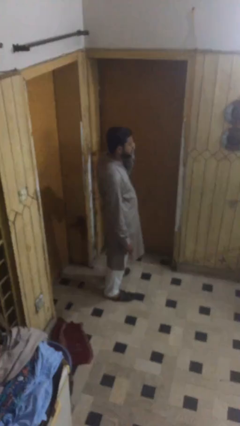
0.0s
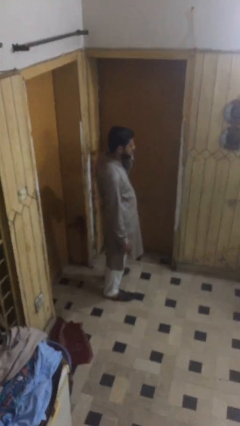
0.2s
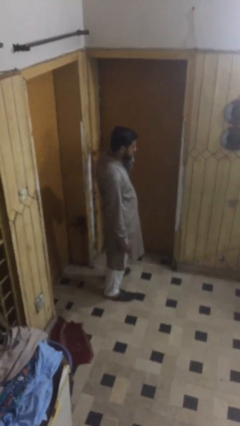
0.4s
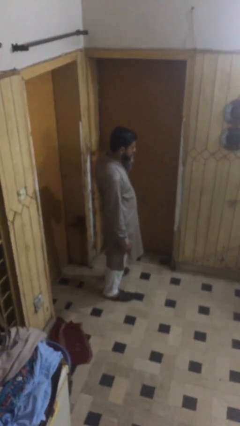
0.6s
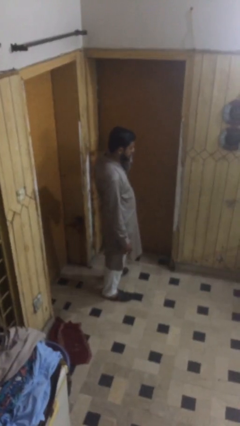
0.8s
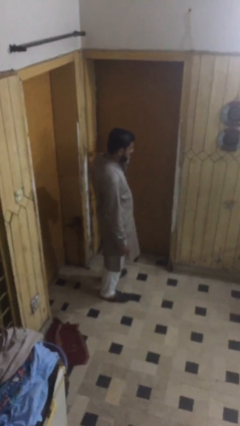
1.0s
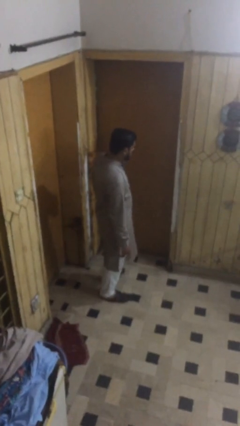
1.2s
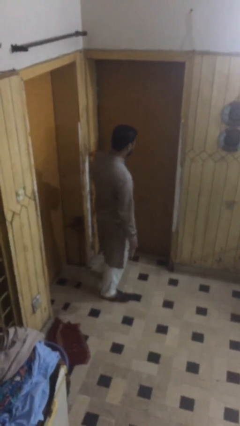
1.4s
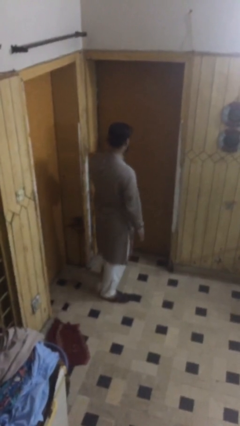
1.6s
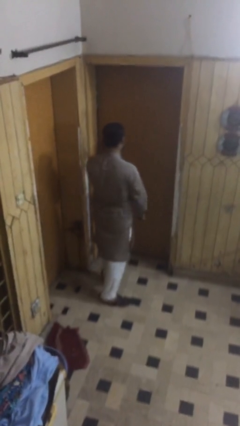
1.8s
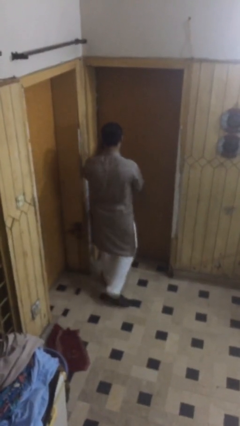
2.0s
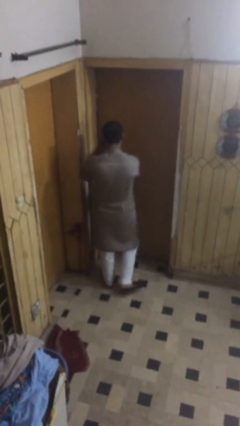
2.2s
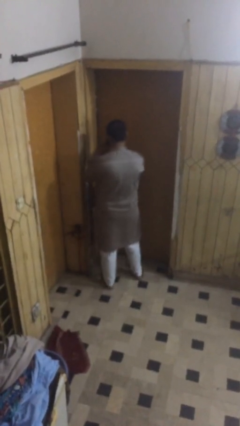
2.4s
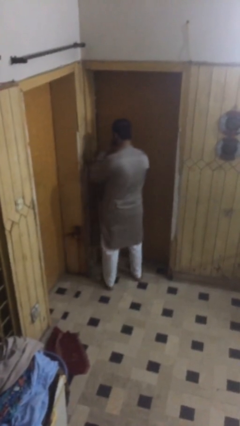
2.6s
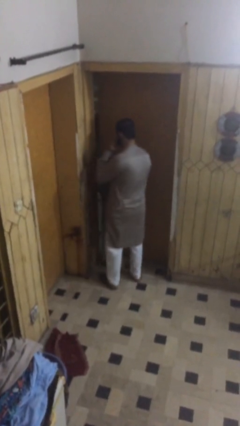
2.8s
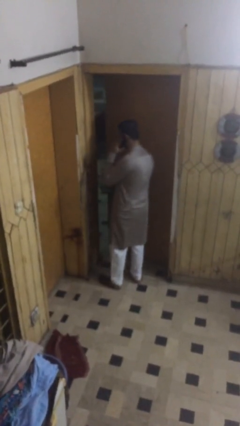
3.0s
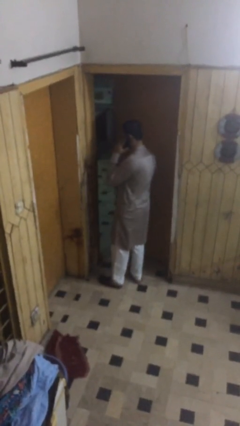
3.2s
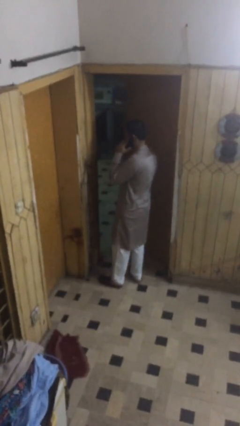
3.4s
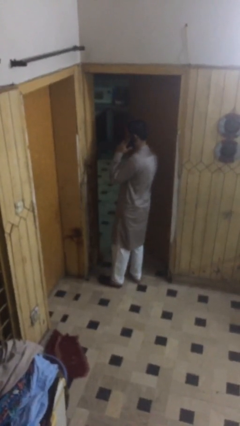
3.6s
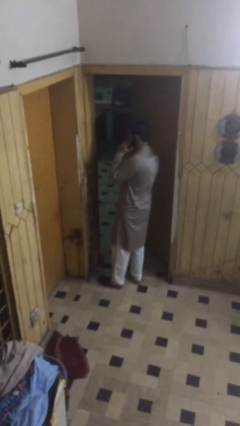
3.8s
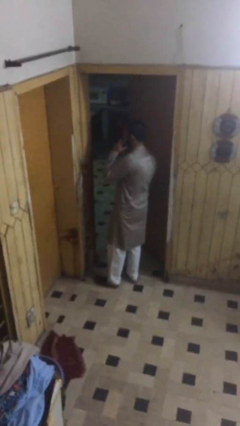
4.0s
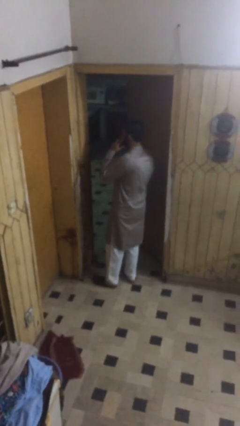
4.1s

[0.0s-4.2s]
person opens facility door

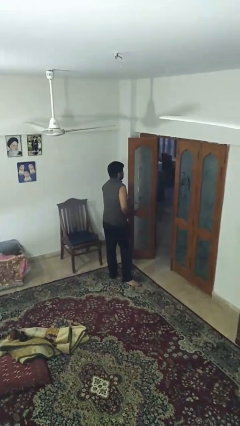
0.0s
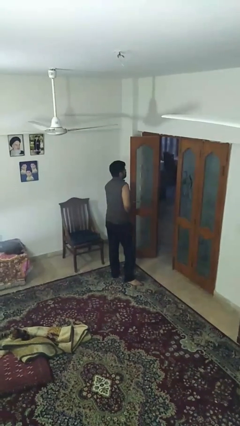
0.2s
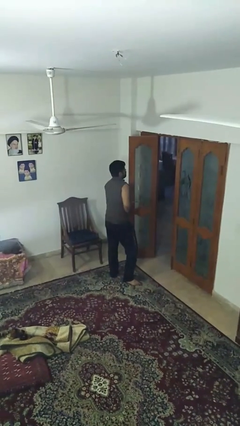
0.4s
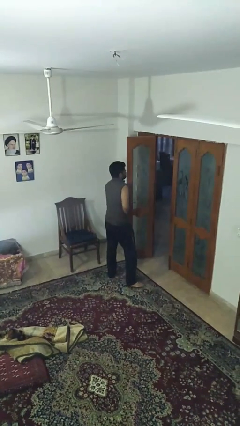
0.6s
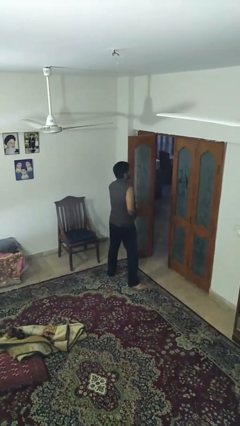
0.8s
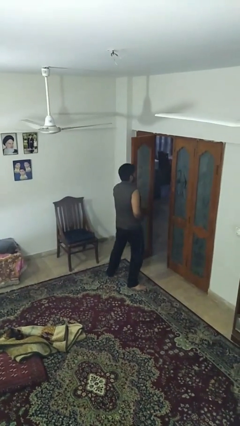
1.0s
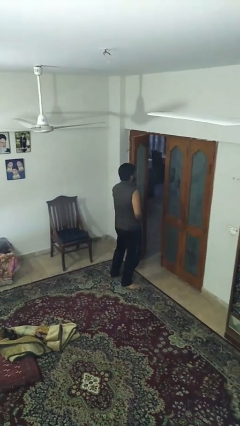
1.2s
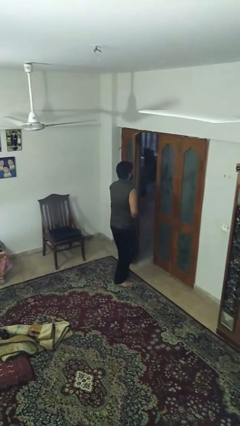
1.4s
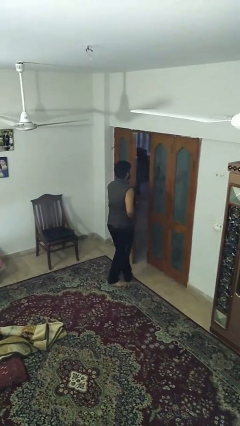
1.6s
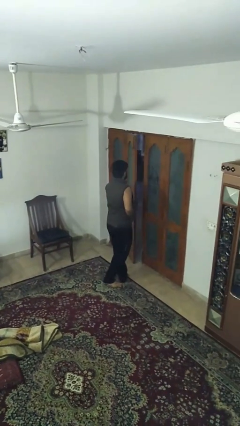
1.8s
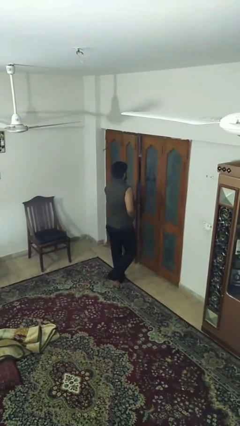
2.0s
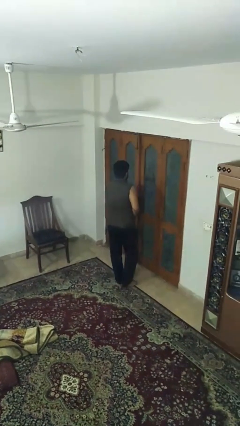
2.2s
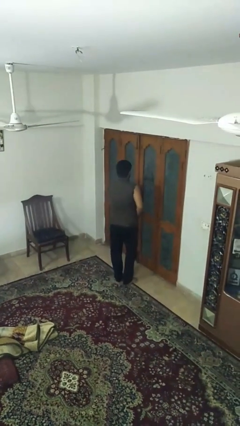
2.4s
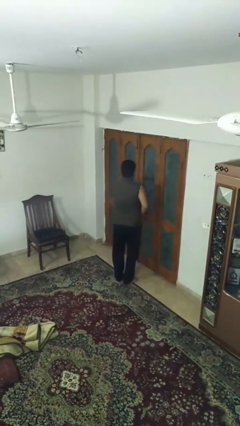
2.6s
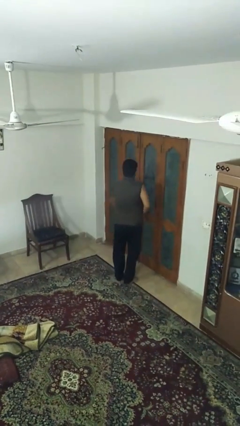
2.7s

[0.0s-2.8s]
person closes facility door

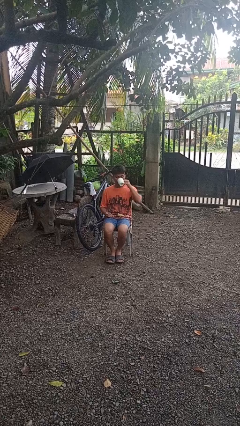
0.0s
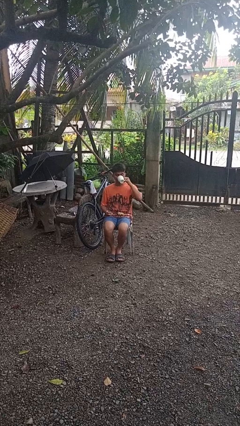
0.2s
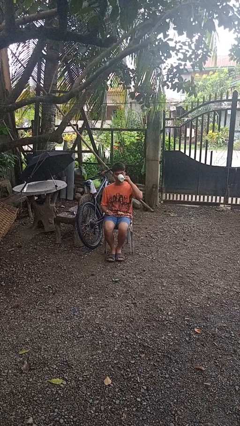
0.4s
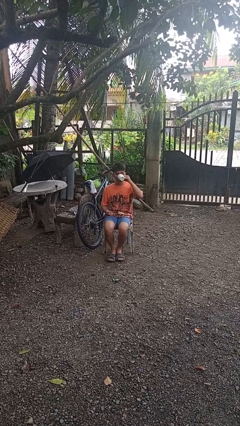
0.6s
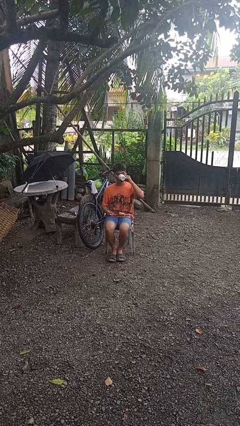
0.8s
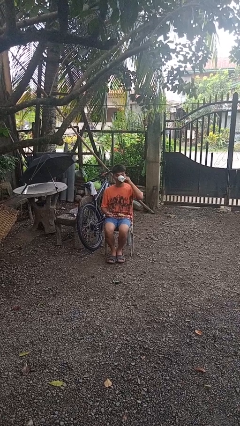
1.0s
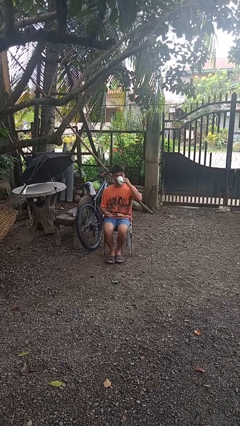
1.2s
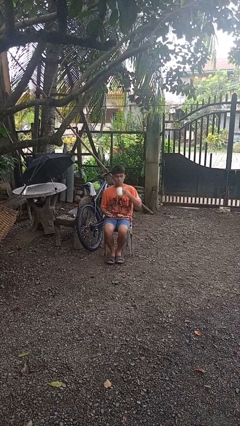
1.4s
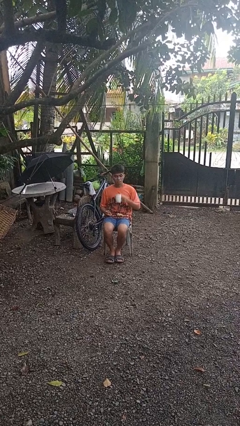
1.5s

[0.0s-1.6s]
person drinks from mug

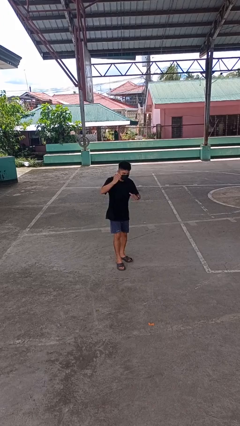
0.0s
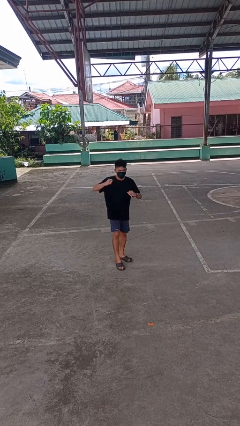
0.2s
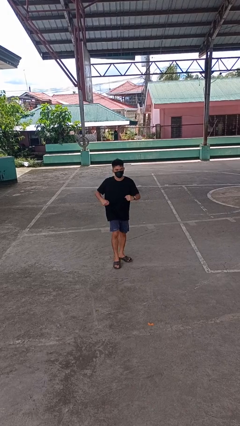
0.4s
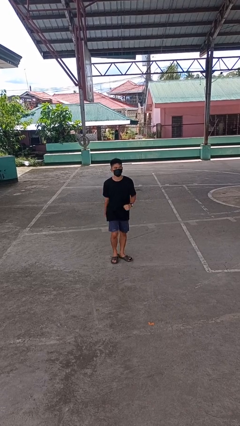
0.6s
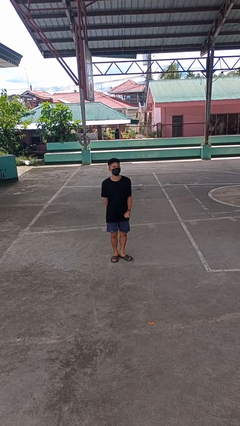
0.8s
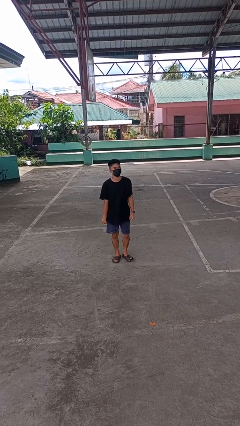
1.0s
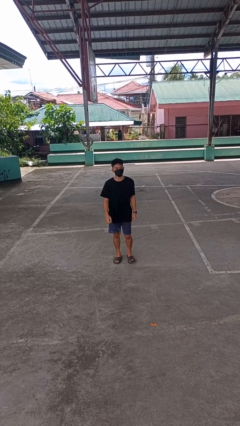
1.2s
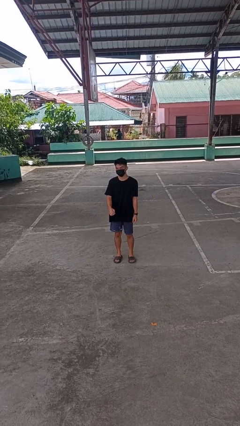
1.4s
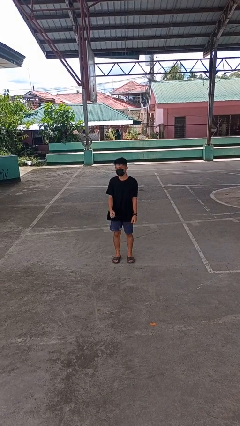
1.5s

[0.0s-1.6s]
person karate chop

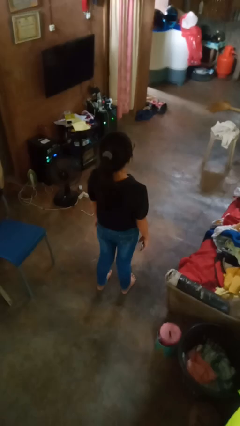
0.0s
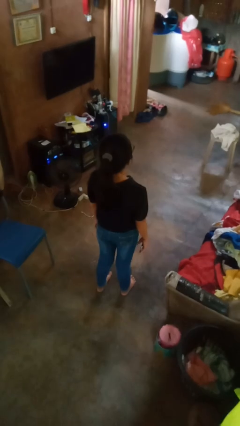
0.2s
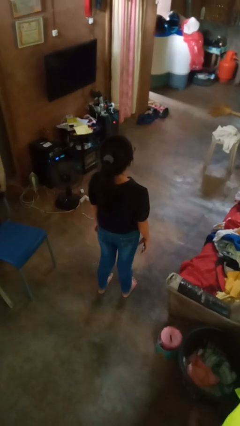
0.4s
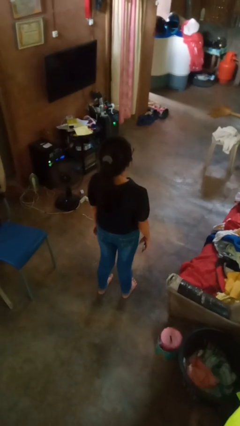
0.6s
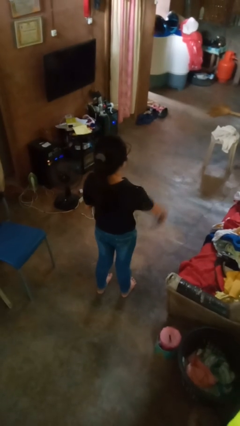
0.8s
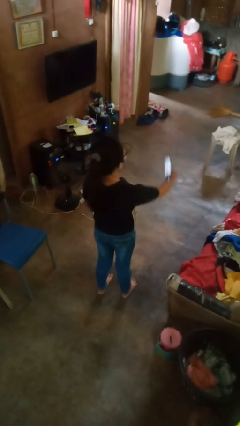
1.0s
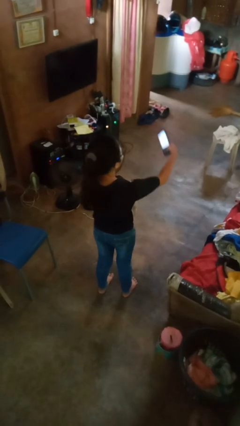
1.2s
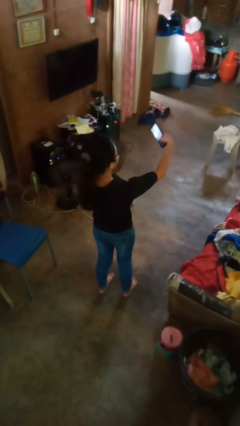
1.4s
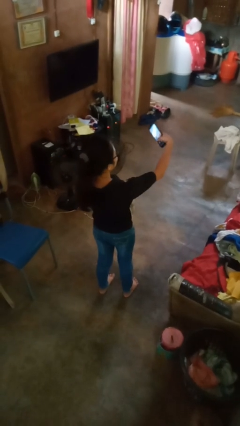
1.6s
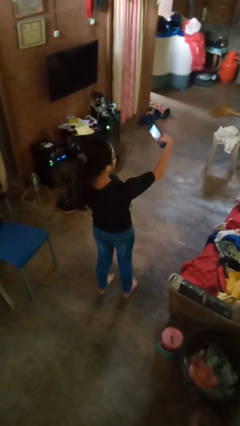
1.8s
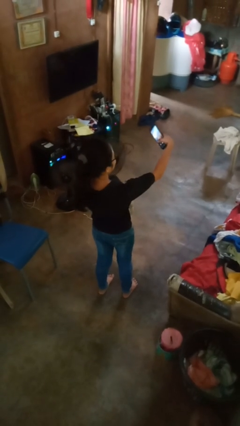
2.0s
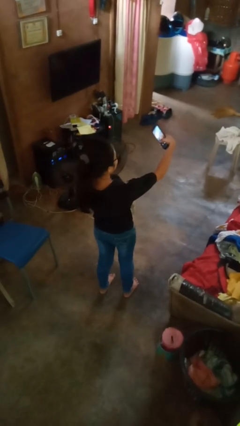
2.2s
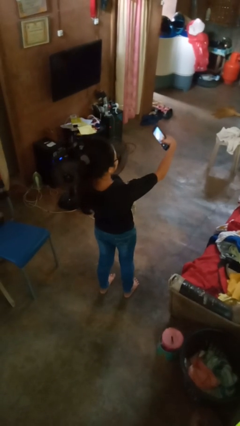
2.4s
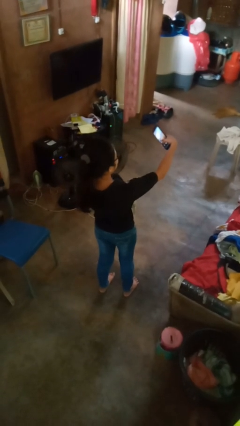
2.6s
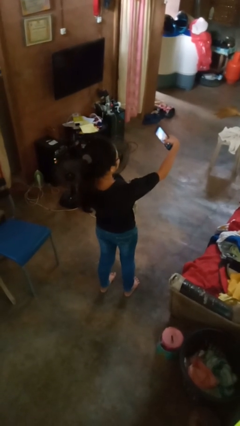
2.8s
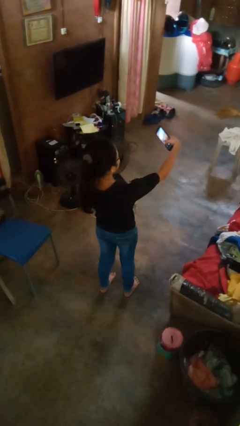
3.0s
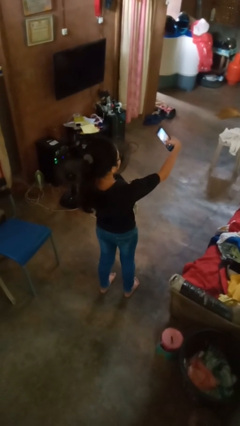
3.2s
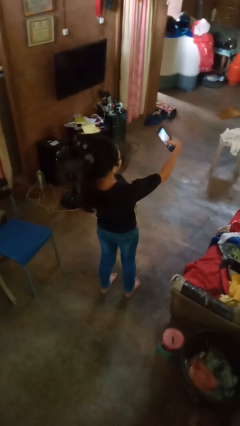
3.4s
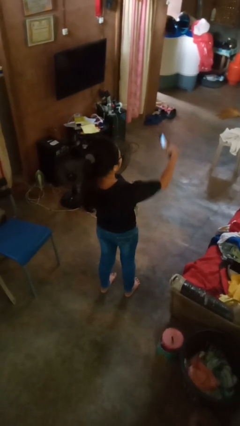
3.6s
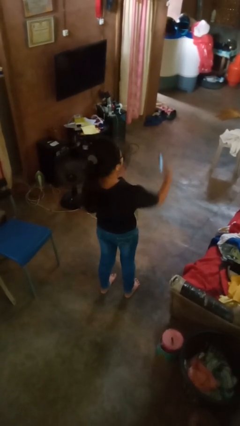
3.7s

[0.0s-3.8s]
person takes selfie

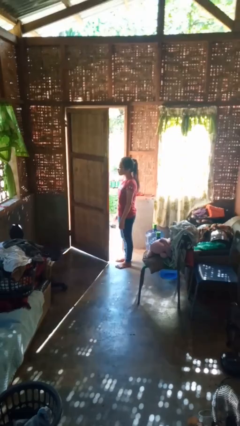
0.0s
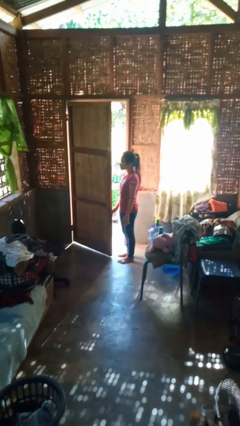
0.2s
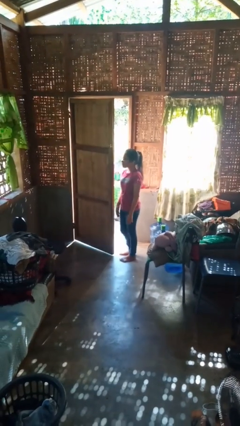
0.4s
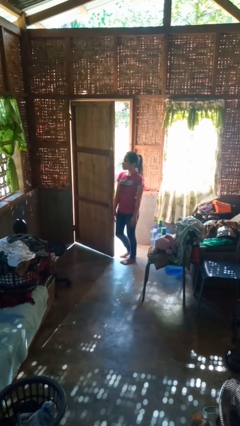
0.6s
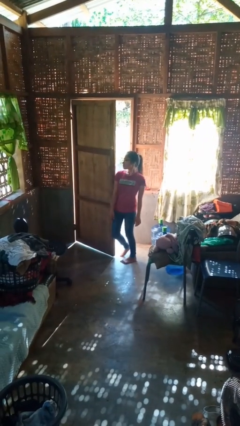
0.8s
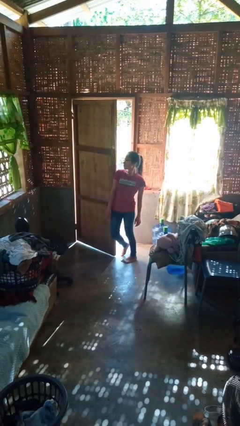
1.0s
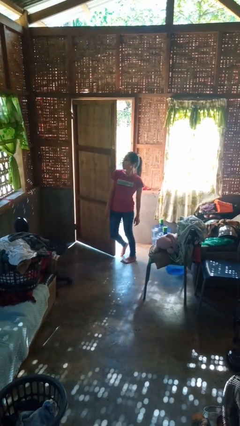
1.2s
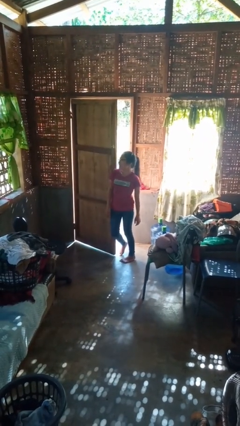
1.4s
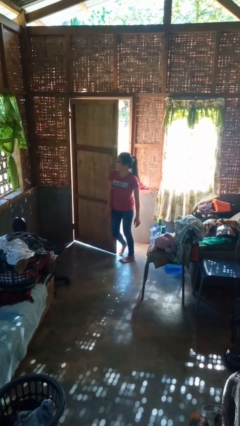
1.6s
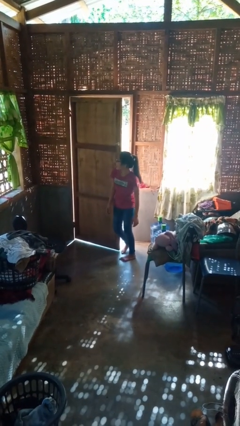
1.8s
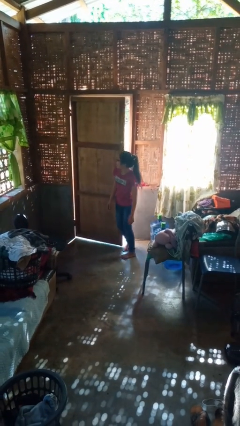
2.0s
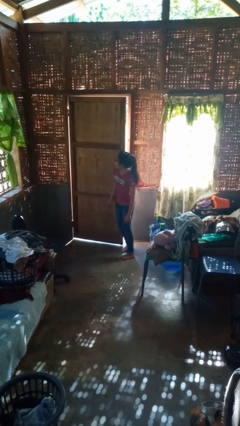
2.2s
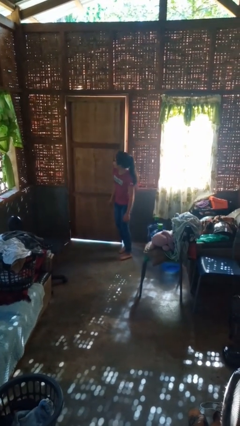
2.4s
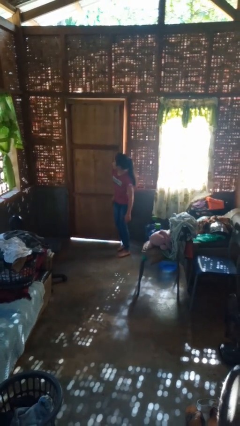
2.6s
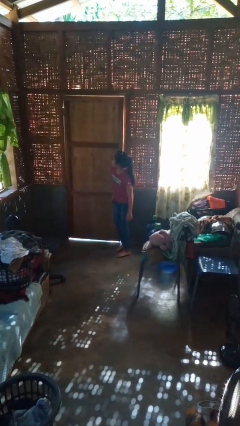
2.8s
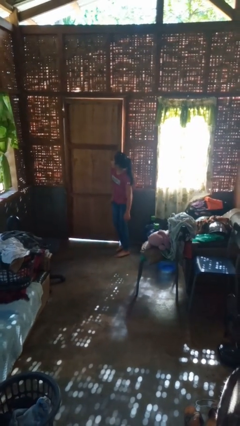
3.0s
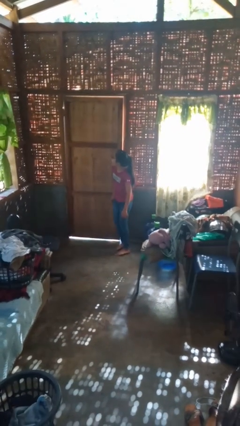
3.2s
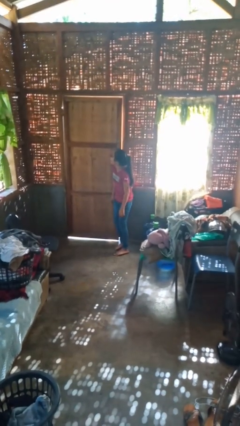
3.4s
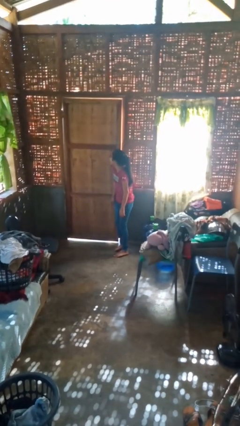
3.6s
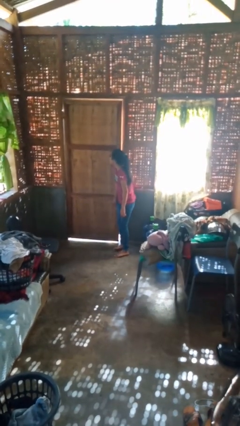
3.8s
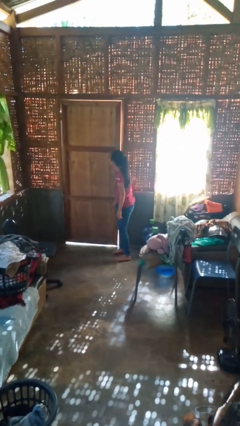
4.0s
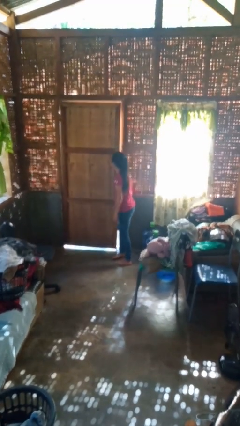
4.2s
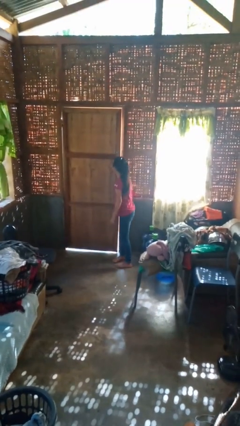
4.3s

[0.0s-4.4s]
person closes door with hip
